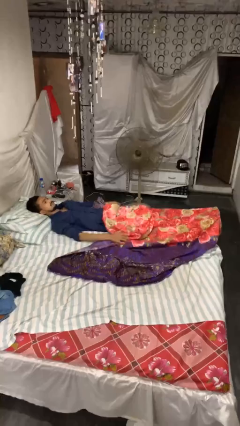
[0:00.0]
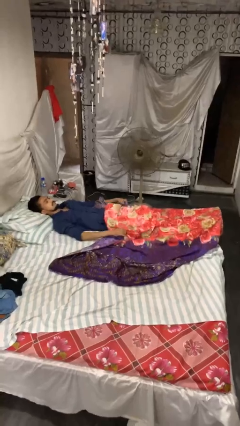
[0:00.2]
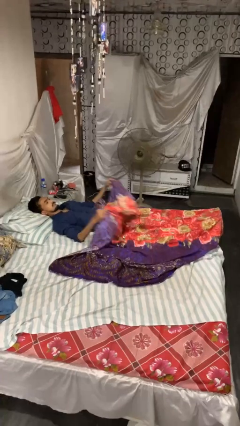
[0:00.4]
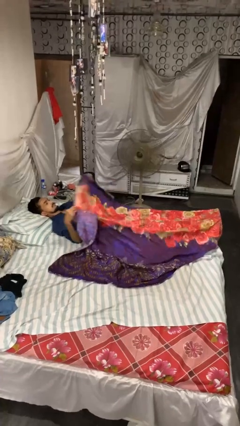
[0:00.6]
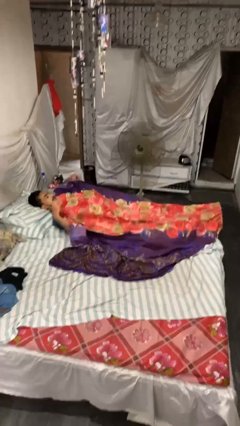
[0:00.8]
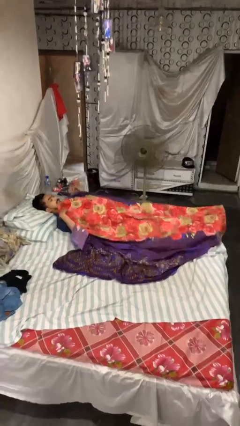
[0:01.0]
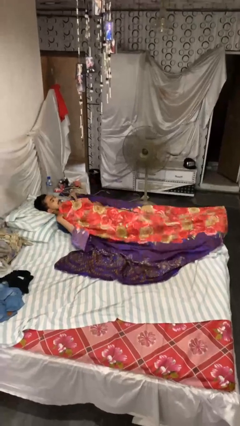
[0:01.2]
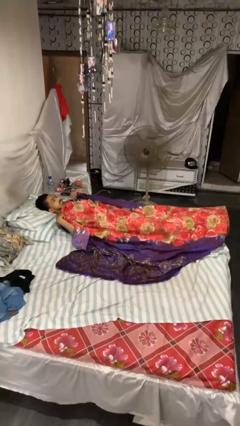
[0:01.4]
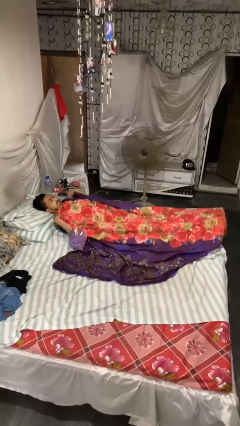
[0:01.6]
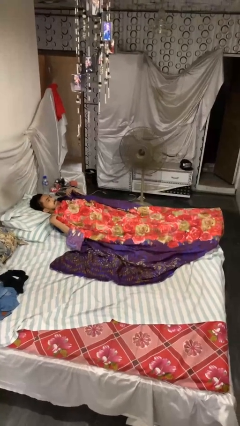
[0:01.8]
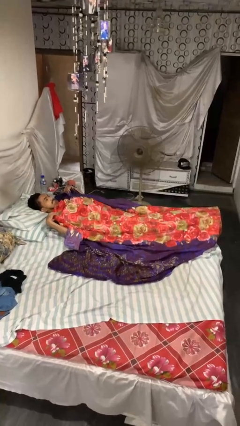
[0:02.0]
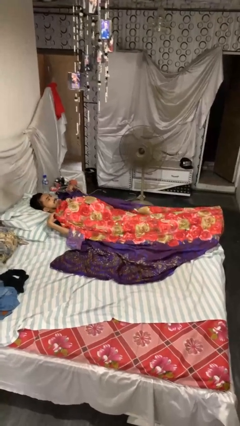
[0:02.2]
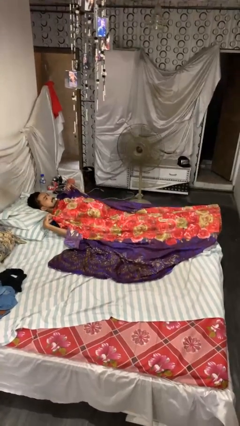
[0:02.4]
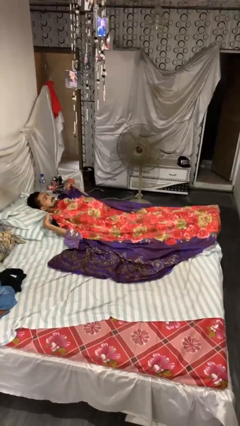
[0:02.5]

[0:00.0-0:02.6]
person covers with bedsheets

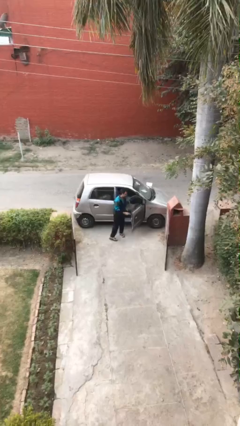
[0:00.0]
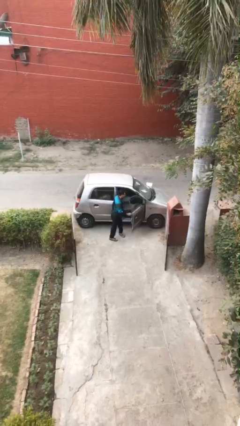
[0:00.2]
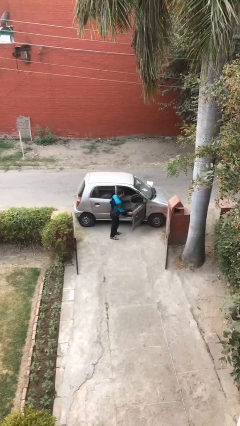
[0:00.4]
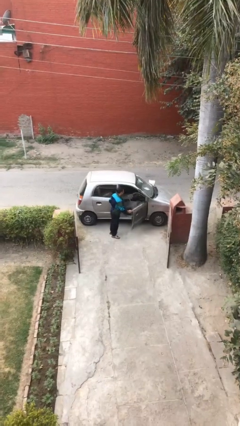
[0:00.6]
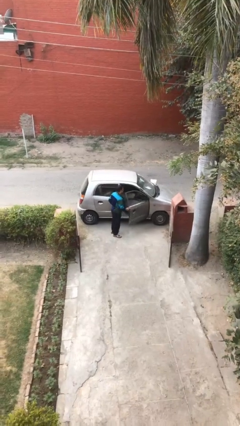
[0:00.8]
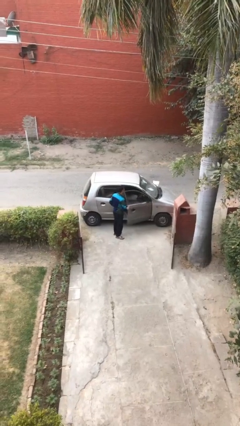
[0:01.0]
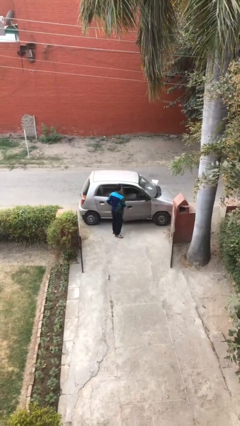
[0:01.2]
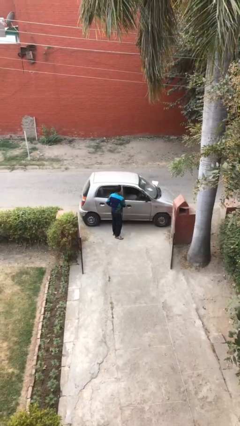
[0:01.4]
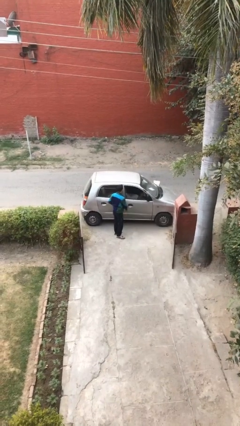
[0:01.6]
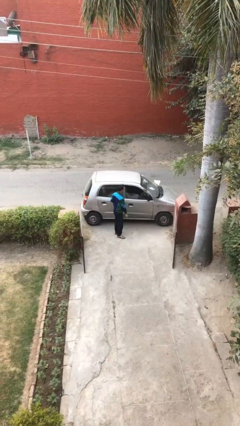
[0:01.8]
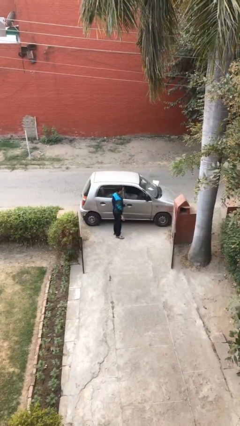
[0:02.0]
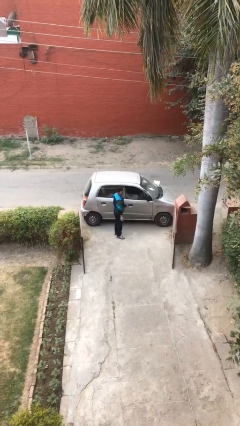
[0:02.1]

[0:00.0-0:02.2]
person closes car door

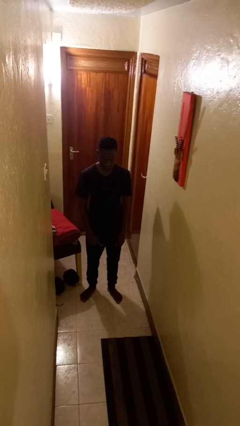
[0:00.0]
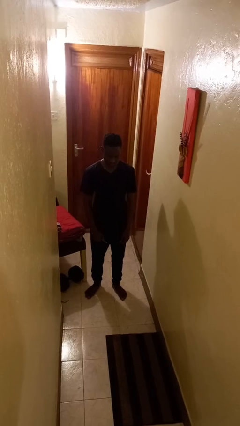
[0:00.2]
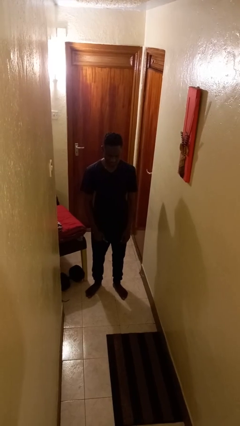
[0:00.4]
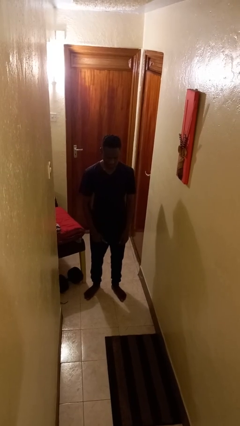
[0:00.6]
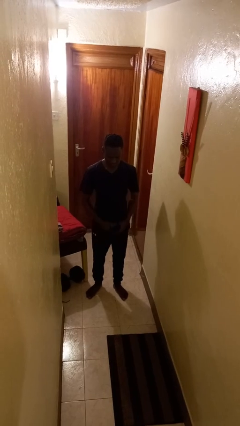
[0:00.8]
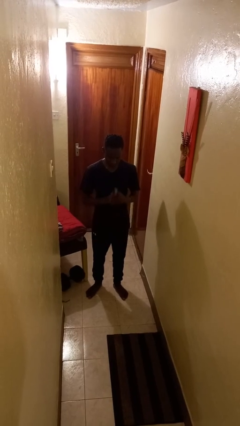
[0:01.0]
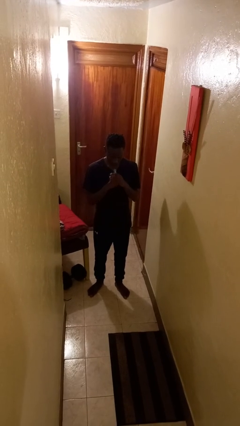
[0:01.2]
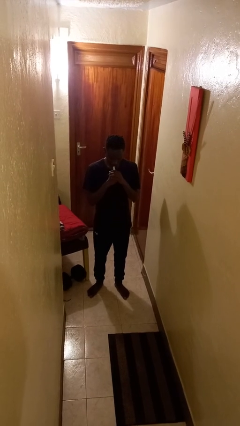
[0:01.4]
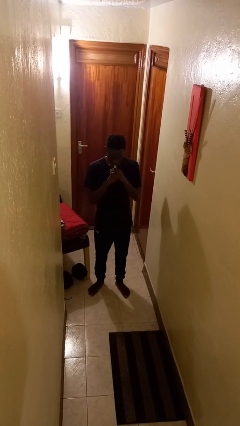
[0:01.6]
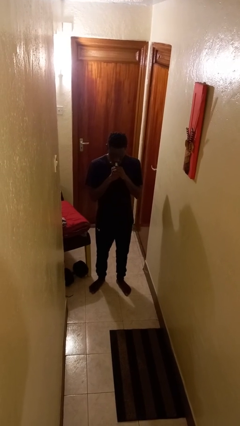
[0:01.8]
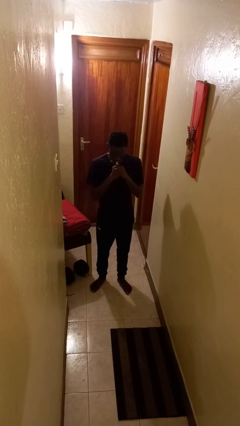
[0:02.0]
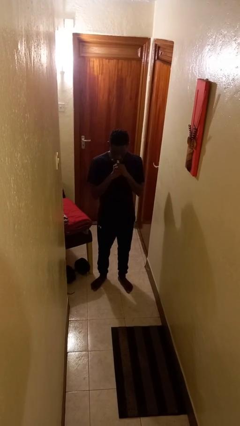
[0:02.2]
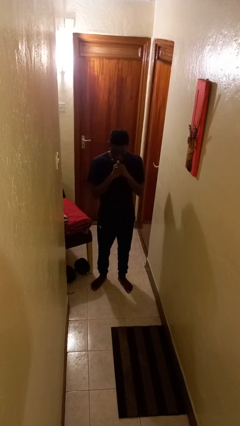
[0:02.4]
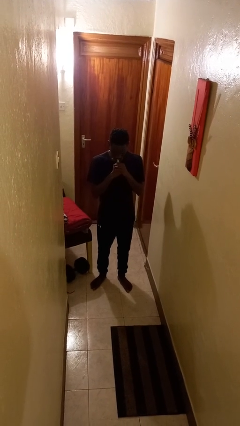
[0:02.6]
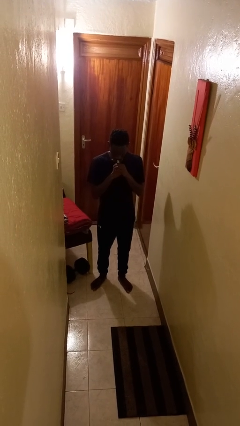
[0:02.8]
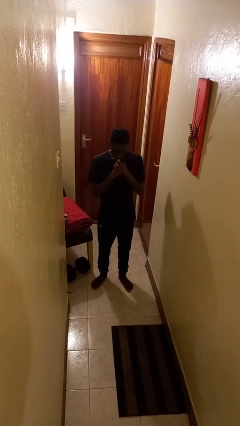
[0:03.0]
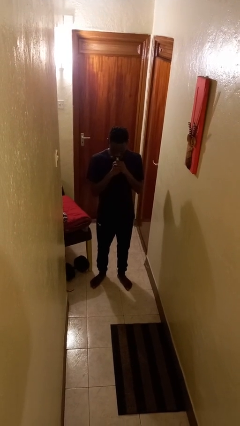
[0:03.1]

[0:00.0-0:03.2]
person vapes

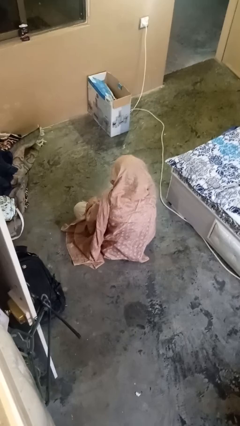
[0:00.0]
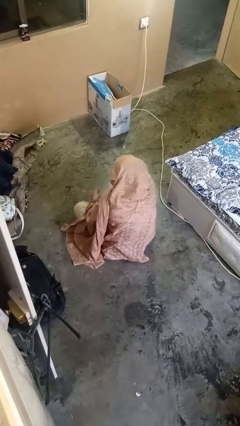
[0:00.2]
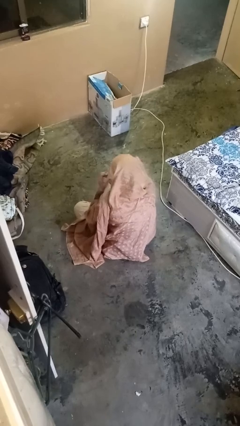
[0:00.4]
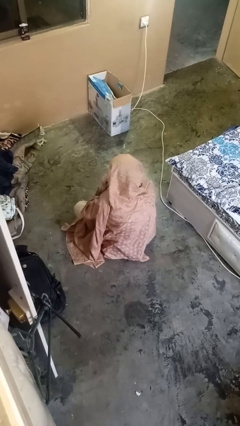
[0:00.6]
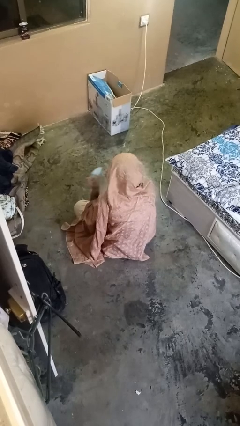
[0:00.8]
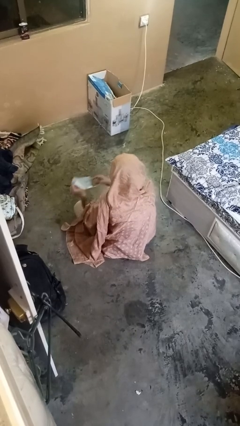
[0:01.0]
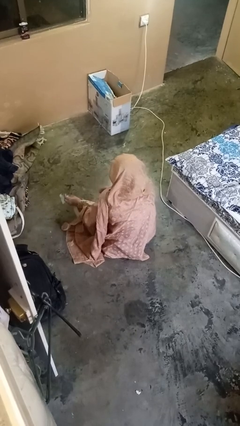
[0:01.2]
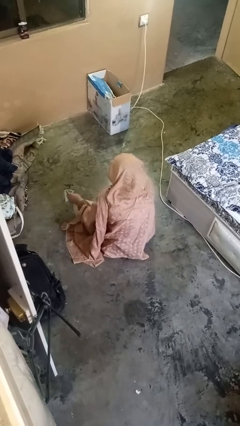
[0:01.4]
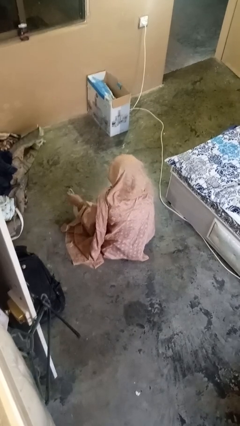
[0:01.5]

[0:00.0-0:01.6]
person takes off facemask

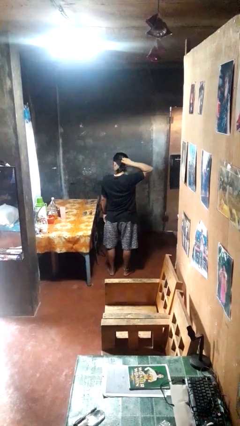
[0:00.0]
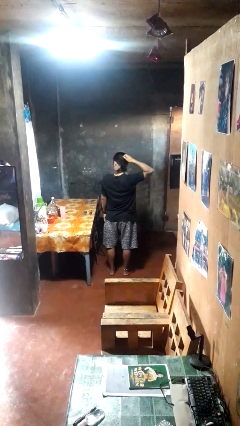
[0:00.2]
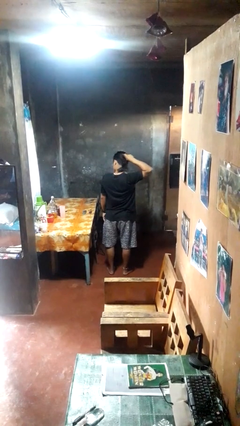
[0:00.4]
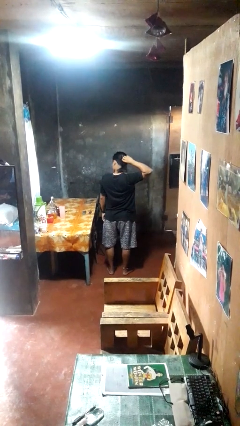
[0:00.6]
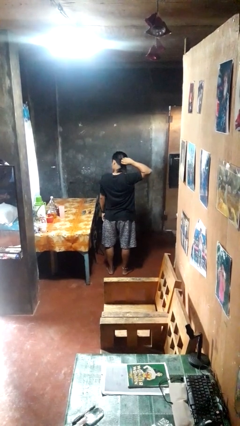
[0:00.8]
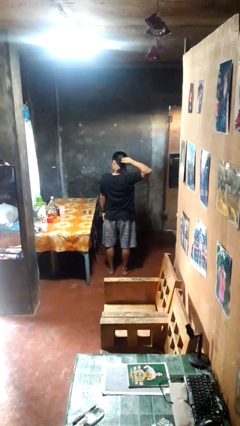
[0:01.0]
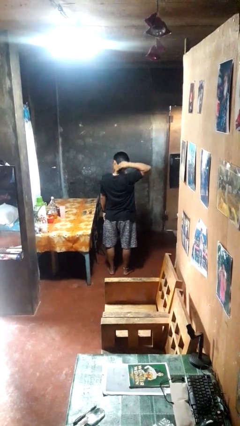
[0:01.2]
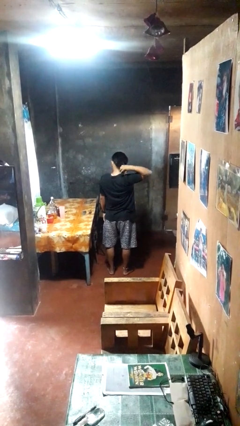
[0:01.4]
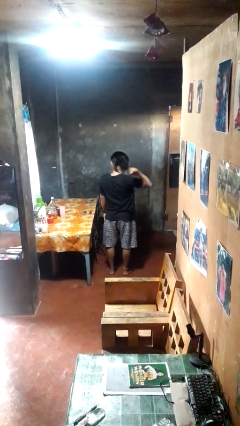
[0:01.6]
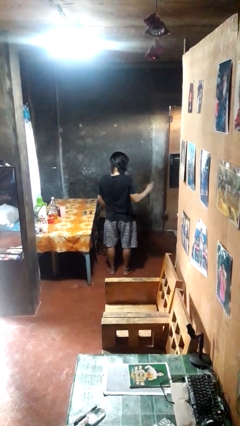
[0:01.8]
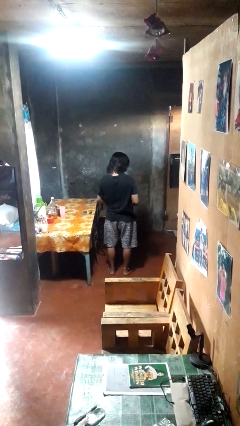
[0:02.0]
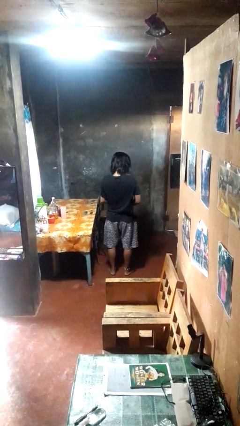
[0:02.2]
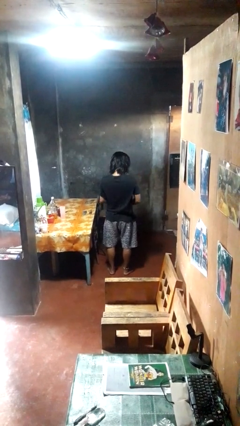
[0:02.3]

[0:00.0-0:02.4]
person takes off hairtie

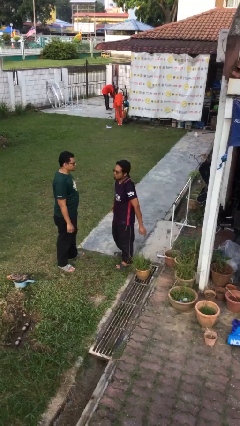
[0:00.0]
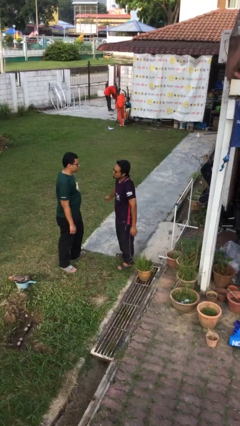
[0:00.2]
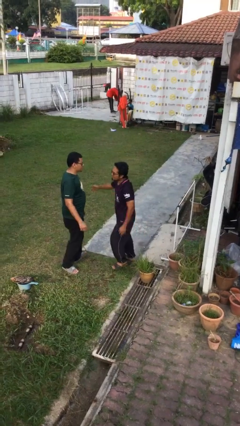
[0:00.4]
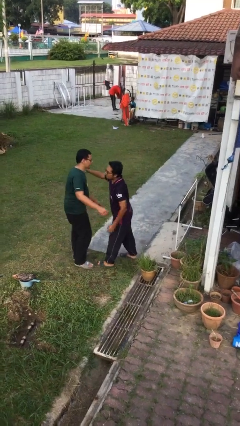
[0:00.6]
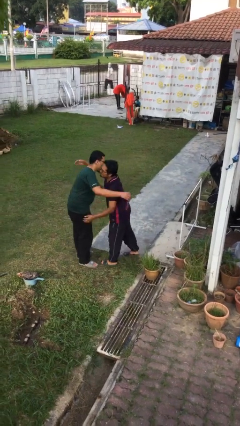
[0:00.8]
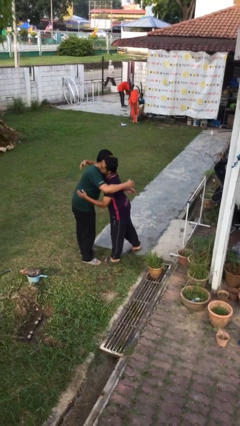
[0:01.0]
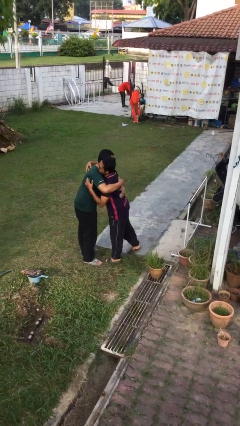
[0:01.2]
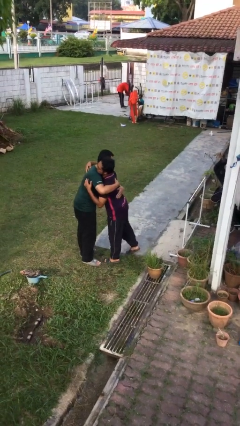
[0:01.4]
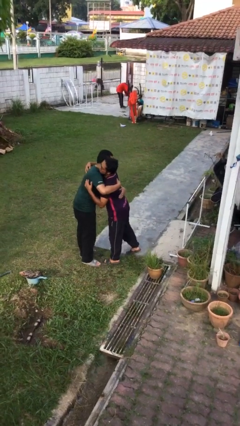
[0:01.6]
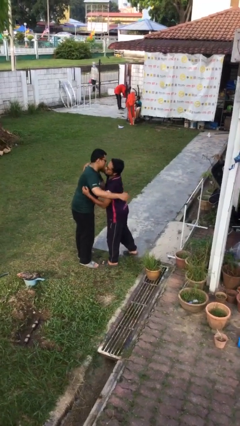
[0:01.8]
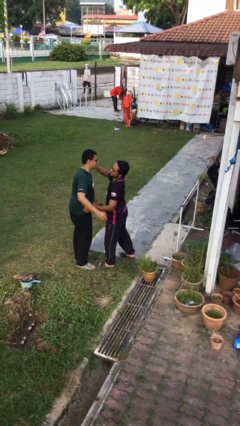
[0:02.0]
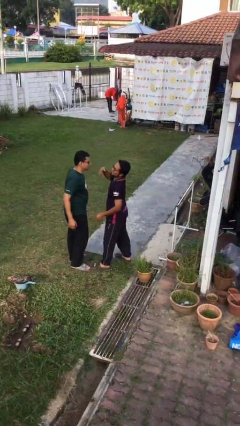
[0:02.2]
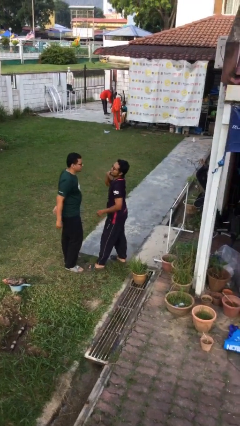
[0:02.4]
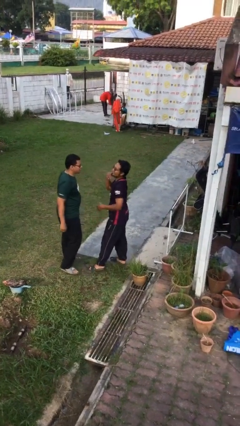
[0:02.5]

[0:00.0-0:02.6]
person embraces person

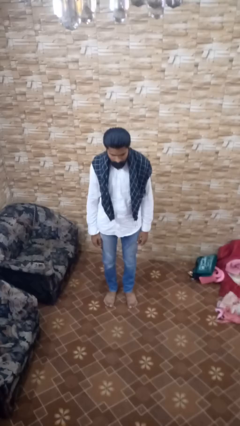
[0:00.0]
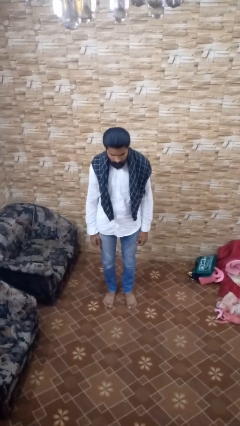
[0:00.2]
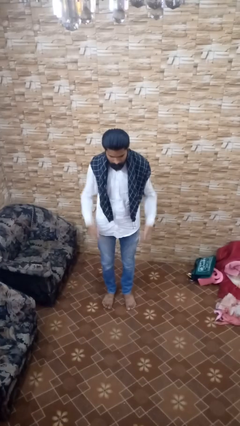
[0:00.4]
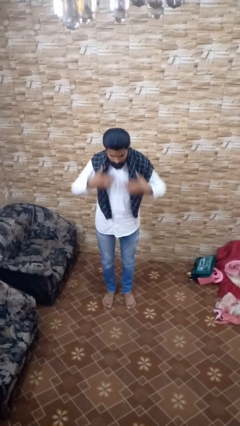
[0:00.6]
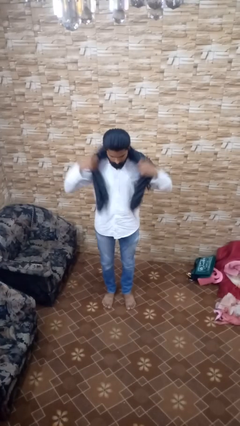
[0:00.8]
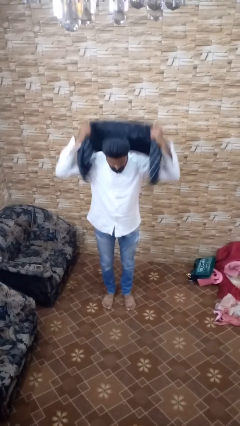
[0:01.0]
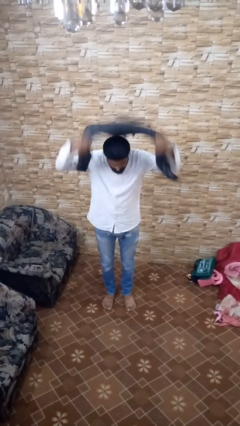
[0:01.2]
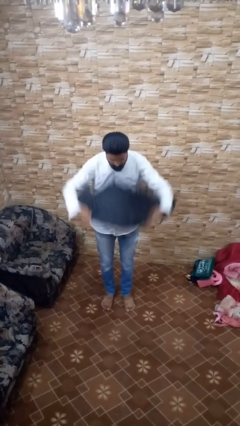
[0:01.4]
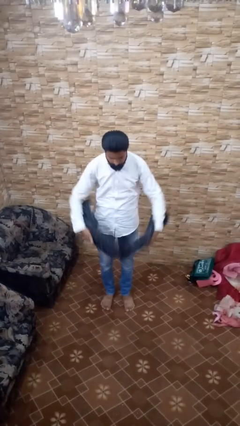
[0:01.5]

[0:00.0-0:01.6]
person takes off scarf

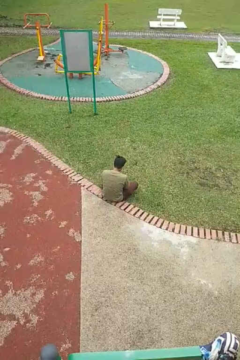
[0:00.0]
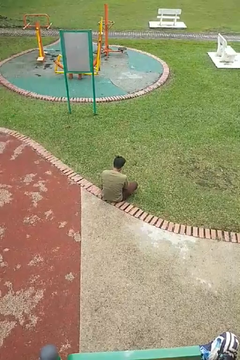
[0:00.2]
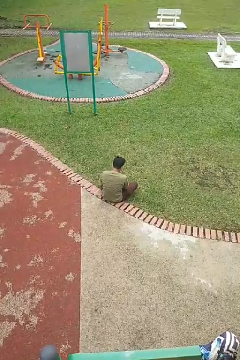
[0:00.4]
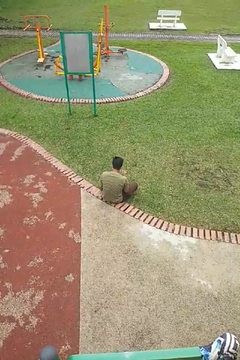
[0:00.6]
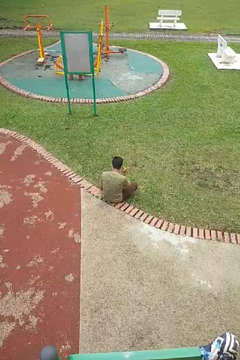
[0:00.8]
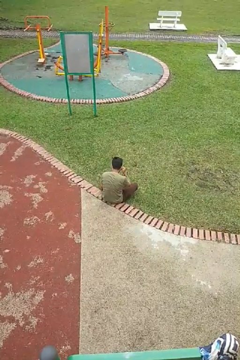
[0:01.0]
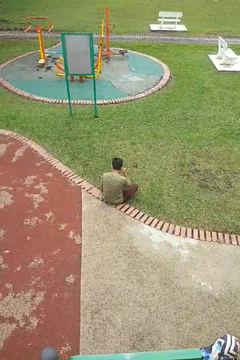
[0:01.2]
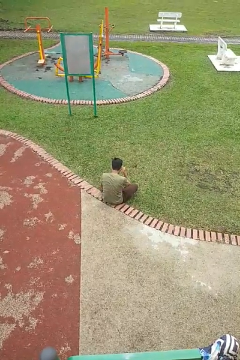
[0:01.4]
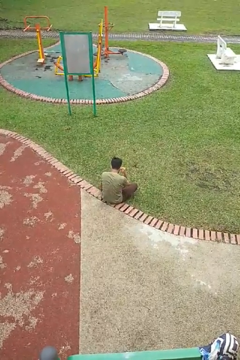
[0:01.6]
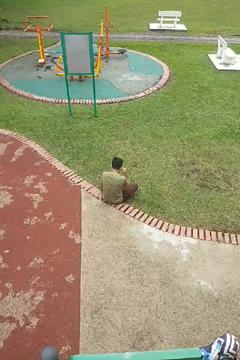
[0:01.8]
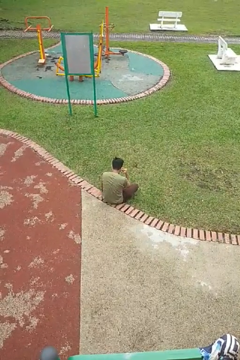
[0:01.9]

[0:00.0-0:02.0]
person touches earlobe
